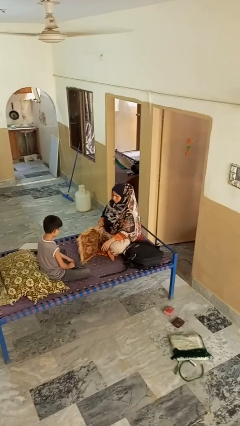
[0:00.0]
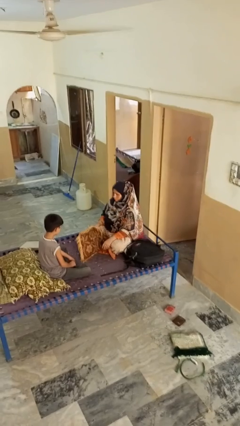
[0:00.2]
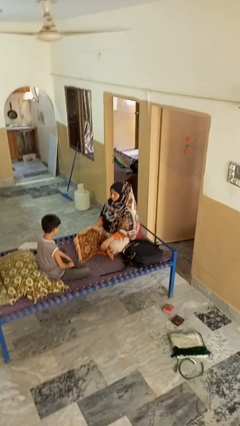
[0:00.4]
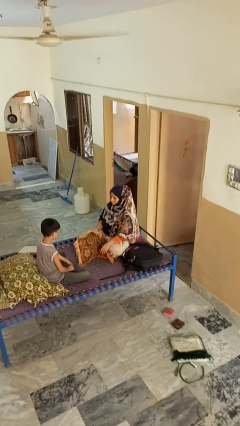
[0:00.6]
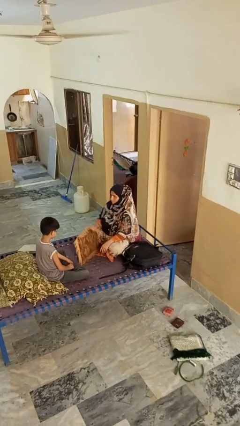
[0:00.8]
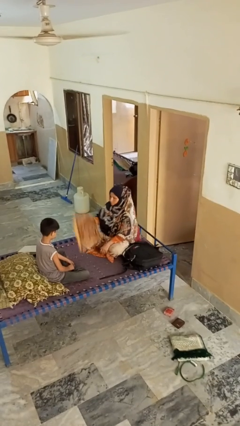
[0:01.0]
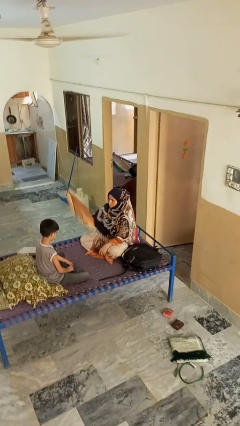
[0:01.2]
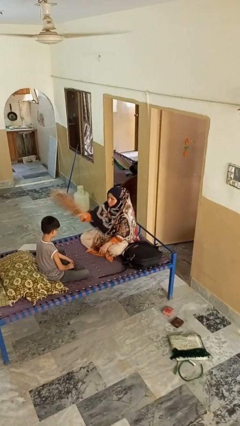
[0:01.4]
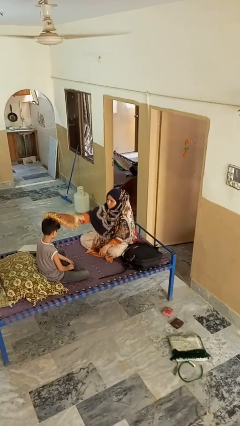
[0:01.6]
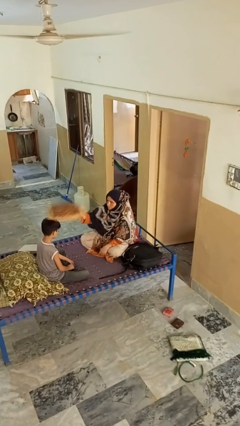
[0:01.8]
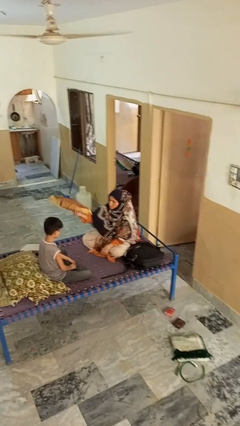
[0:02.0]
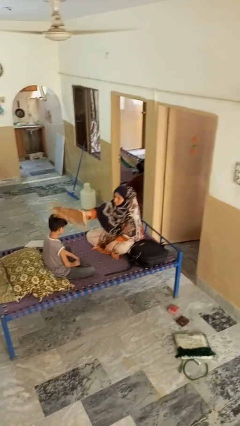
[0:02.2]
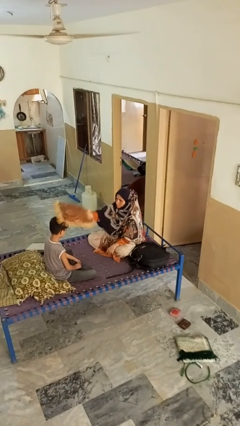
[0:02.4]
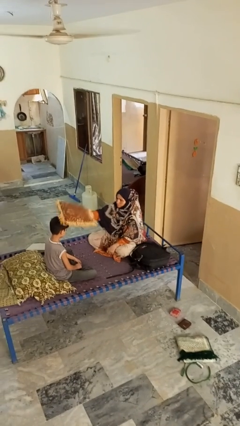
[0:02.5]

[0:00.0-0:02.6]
person hits person with pillow

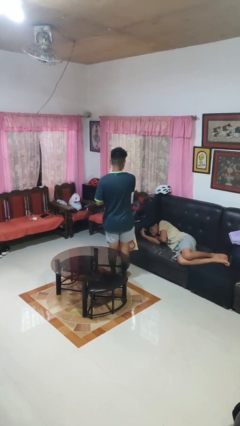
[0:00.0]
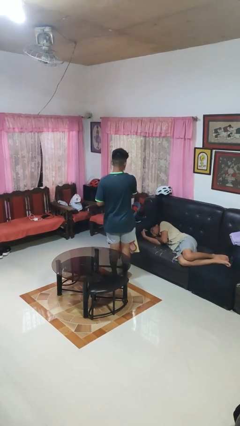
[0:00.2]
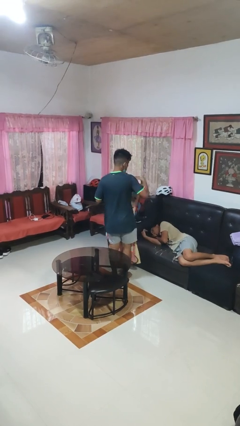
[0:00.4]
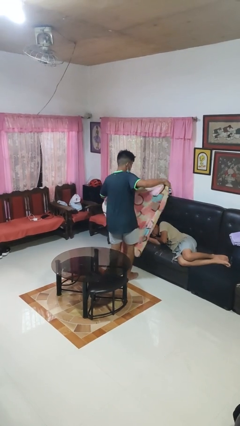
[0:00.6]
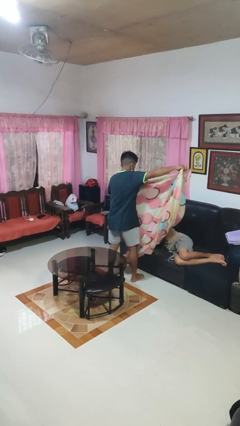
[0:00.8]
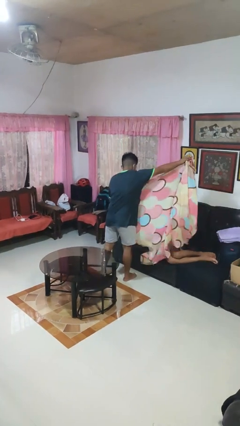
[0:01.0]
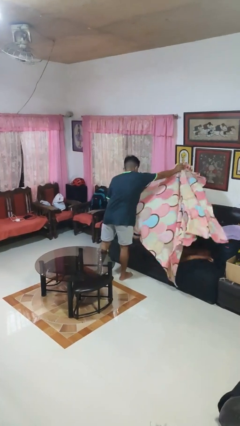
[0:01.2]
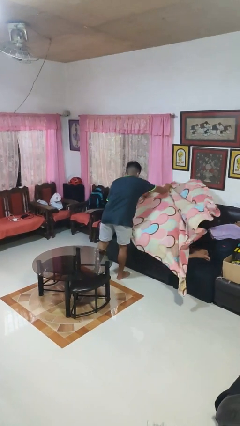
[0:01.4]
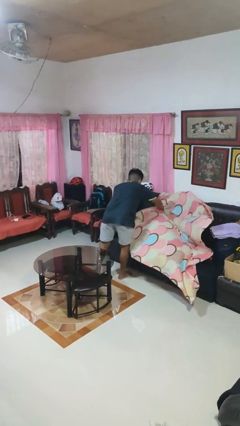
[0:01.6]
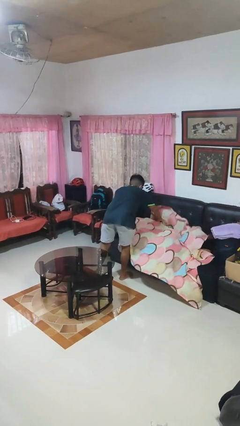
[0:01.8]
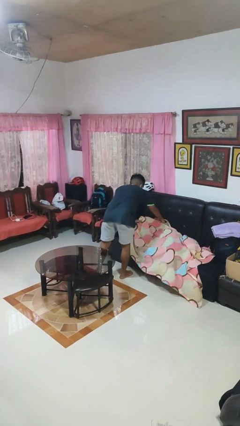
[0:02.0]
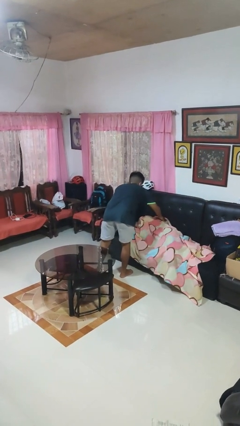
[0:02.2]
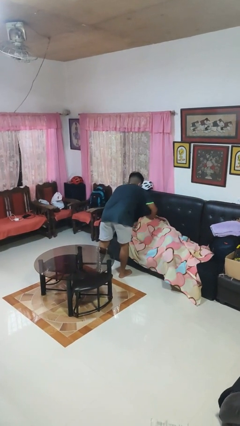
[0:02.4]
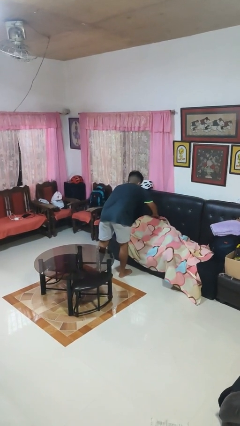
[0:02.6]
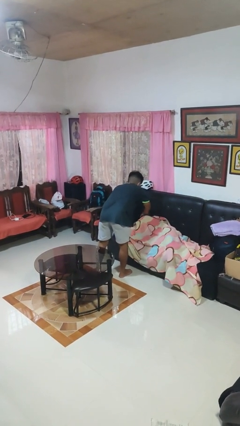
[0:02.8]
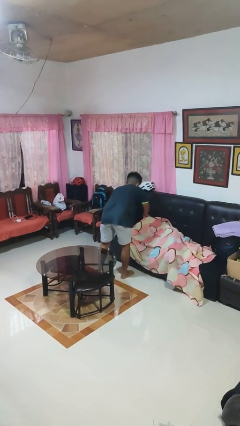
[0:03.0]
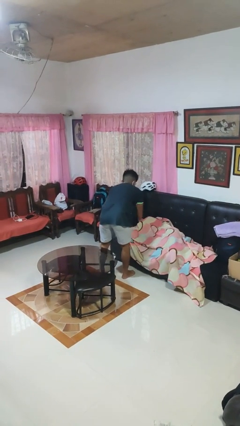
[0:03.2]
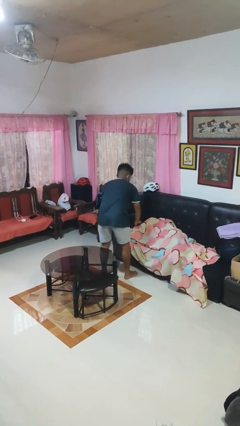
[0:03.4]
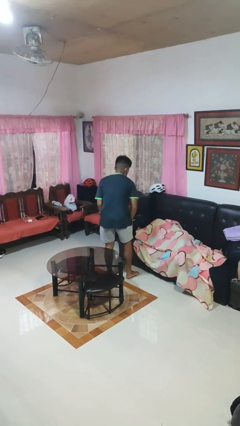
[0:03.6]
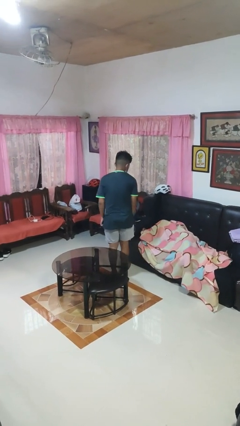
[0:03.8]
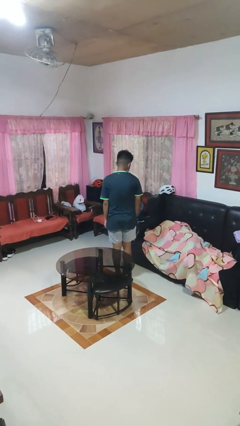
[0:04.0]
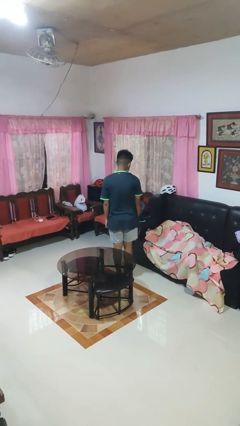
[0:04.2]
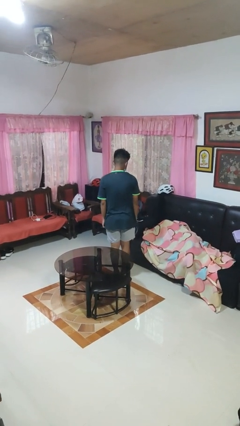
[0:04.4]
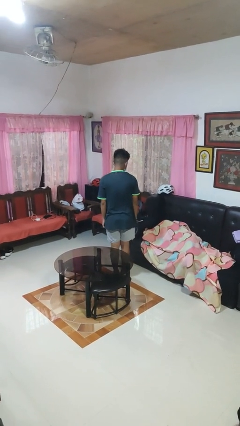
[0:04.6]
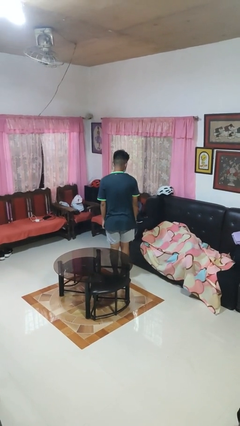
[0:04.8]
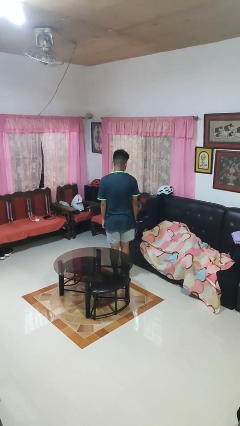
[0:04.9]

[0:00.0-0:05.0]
person covers friend with blanket

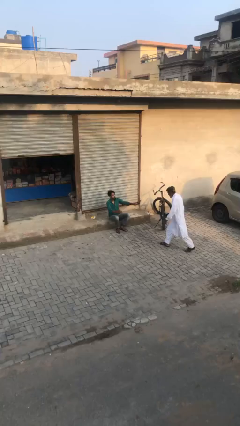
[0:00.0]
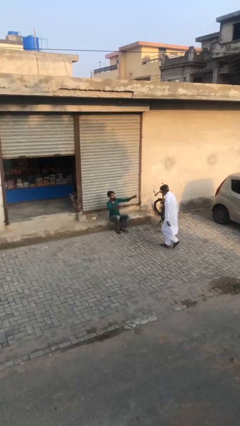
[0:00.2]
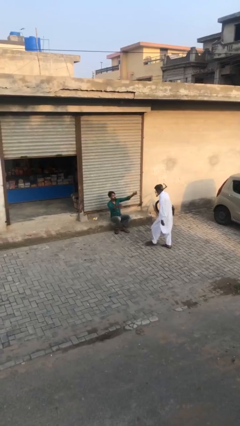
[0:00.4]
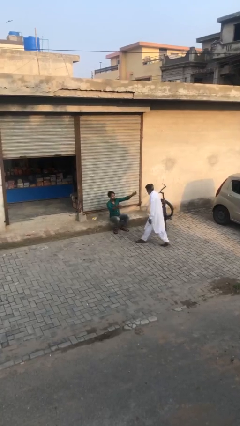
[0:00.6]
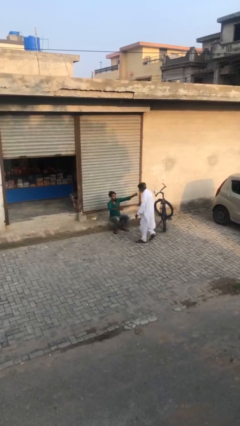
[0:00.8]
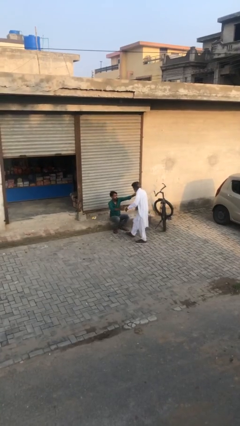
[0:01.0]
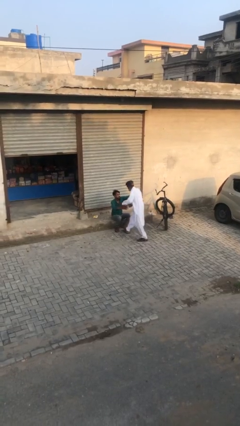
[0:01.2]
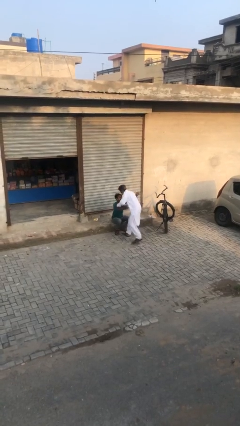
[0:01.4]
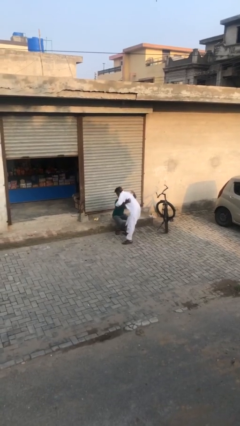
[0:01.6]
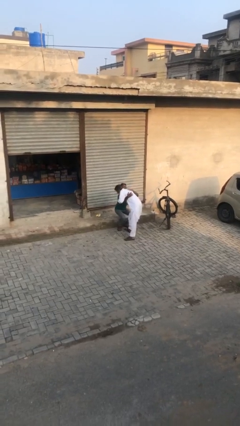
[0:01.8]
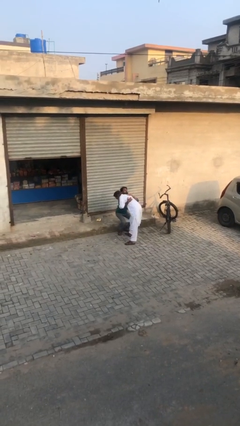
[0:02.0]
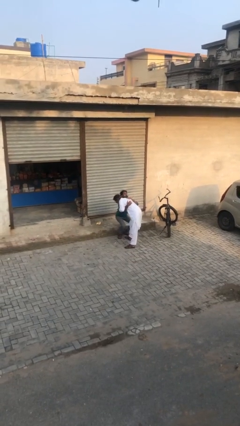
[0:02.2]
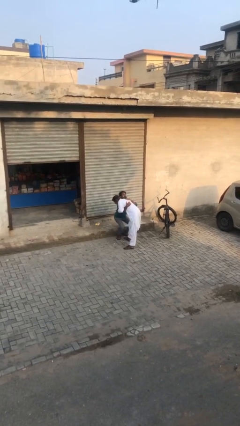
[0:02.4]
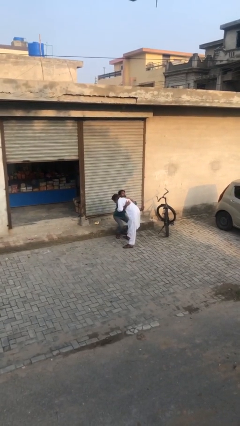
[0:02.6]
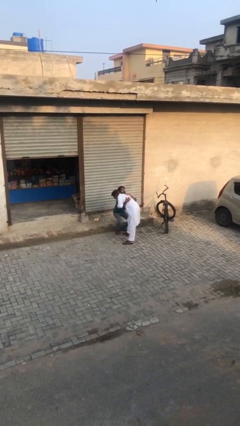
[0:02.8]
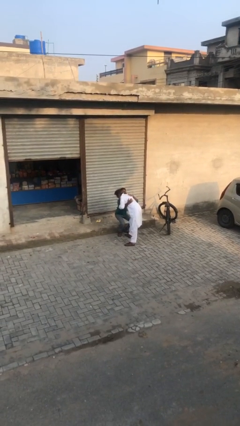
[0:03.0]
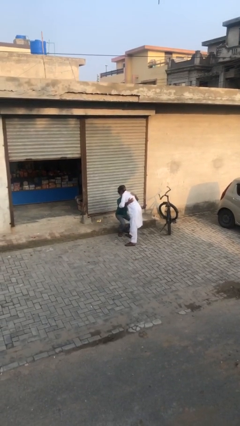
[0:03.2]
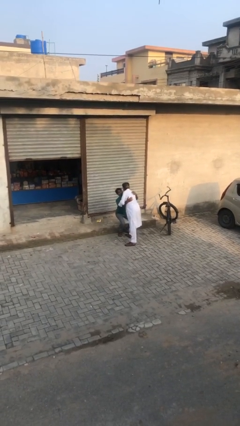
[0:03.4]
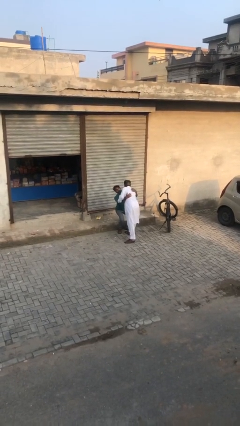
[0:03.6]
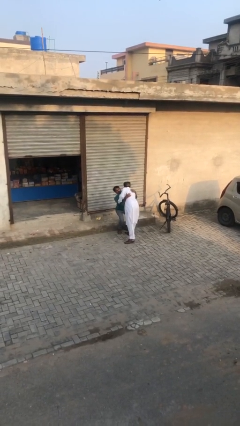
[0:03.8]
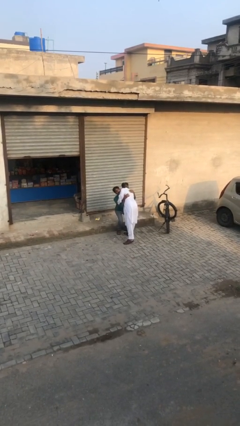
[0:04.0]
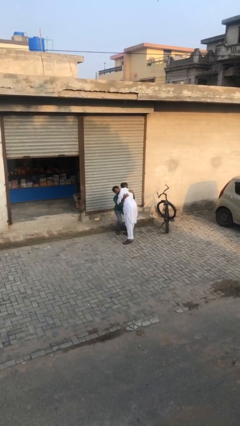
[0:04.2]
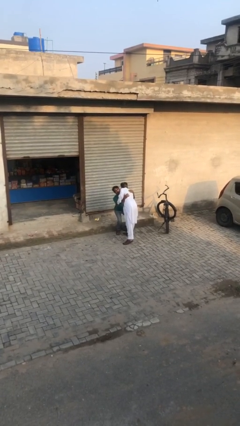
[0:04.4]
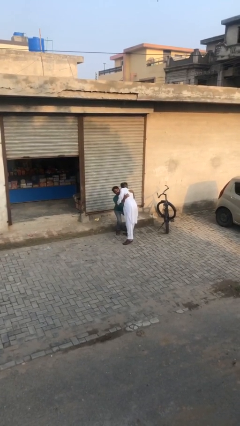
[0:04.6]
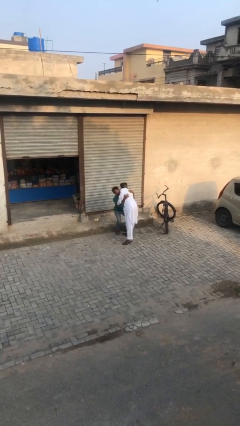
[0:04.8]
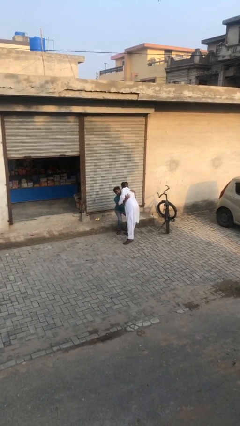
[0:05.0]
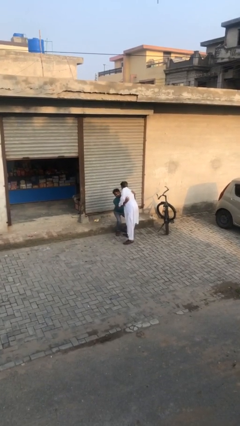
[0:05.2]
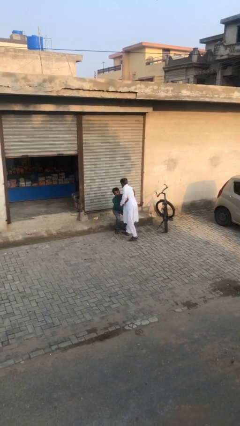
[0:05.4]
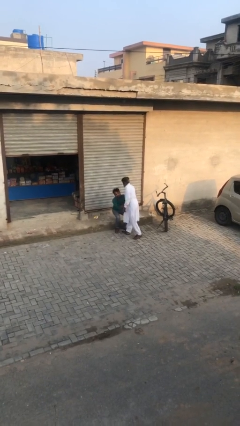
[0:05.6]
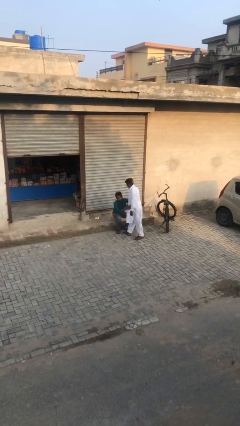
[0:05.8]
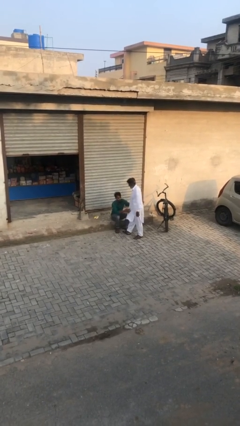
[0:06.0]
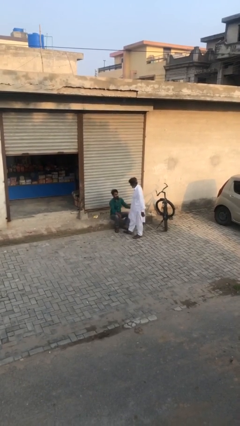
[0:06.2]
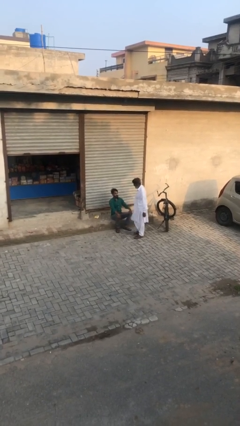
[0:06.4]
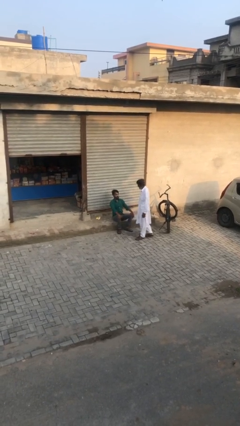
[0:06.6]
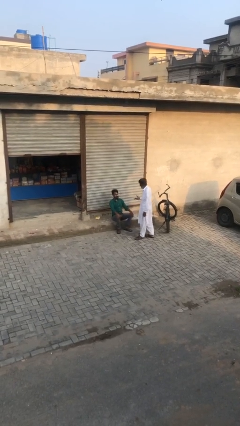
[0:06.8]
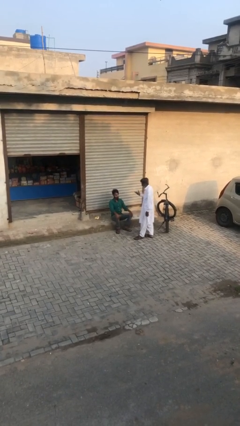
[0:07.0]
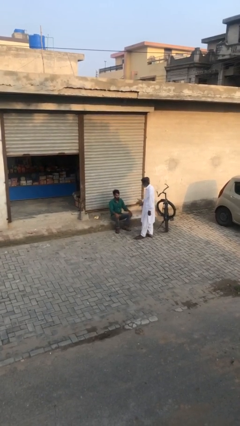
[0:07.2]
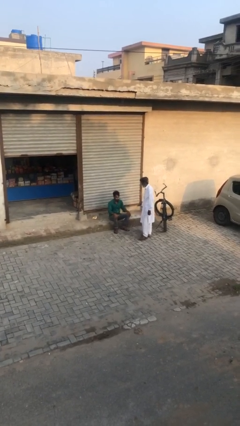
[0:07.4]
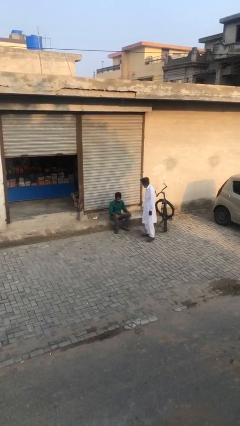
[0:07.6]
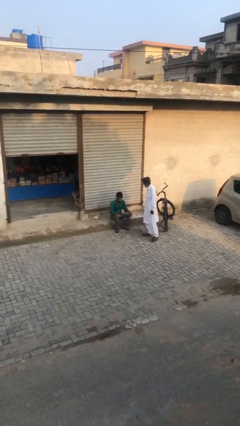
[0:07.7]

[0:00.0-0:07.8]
person embraces person

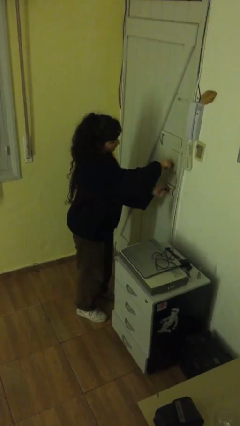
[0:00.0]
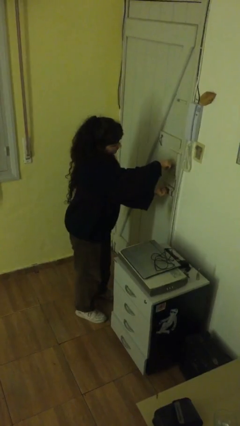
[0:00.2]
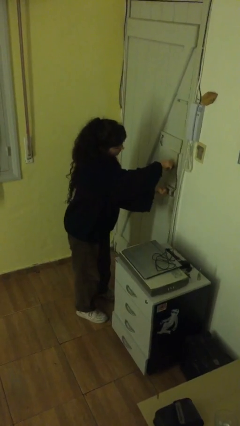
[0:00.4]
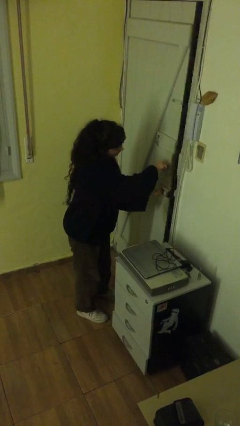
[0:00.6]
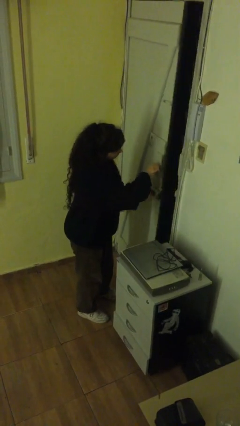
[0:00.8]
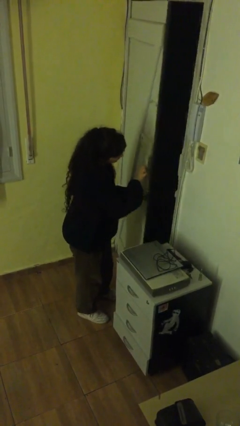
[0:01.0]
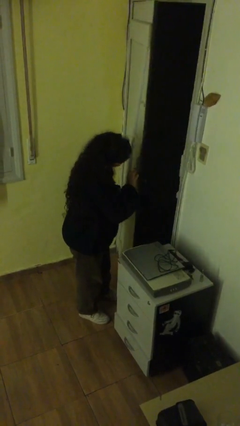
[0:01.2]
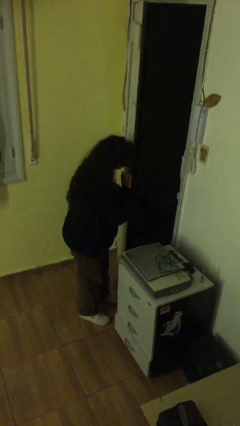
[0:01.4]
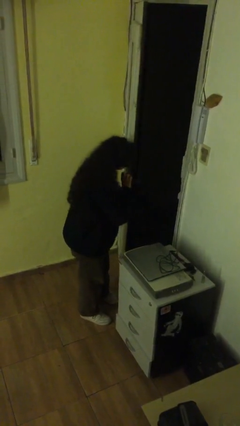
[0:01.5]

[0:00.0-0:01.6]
person opens facility door

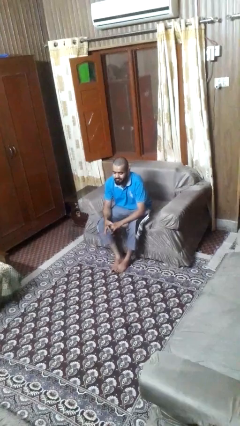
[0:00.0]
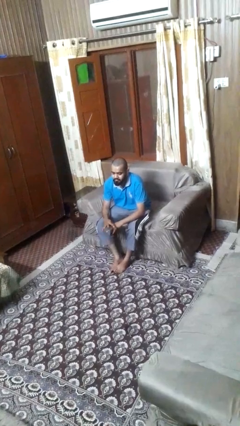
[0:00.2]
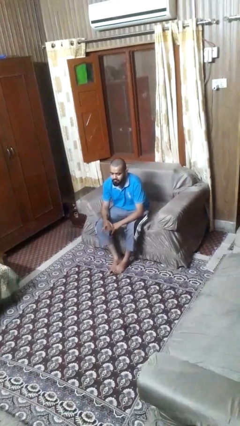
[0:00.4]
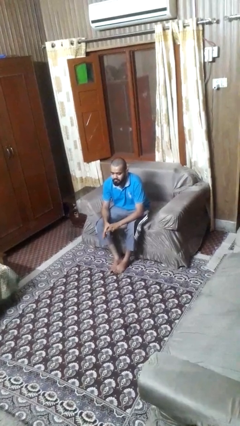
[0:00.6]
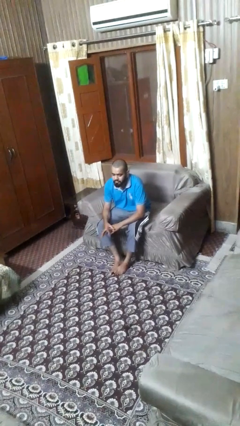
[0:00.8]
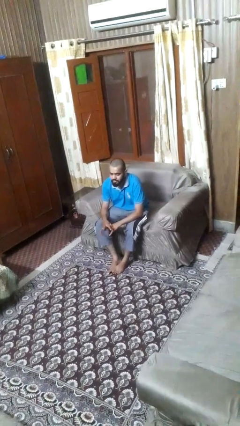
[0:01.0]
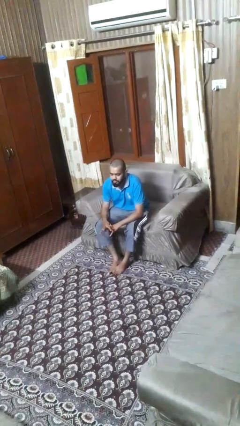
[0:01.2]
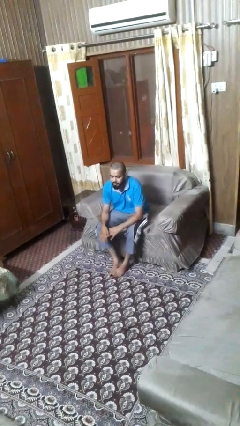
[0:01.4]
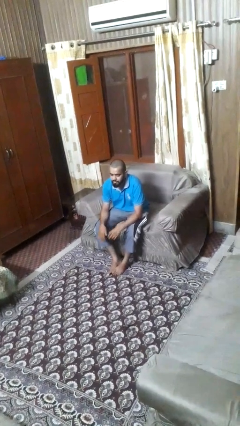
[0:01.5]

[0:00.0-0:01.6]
person cracks knuckles
